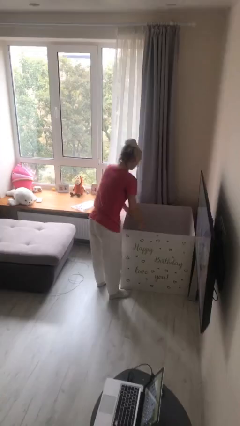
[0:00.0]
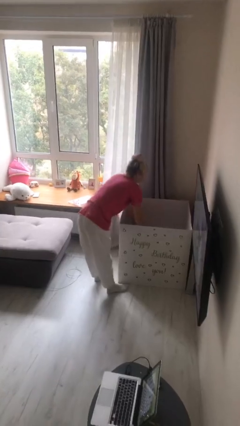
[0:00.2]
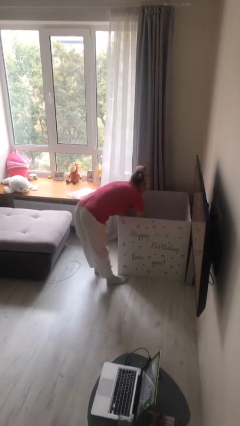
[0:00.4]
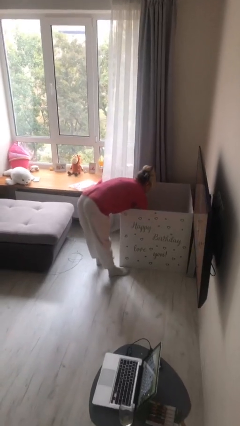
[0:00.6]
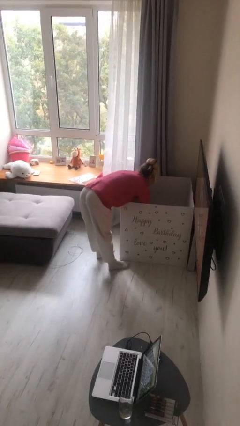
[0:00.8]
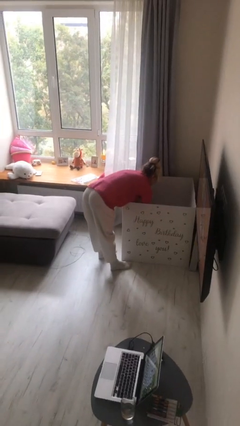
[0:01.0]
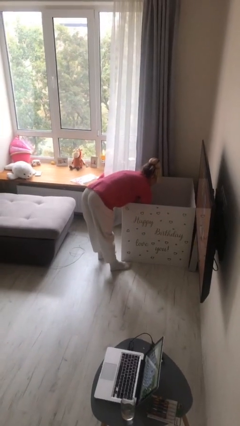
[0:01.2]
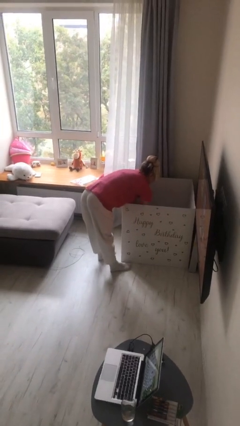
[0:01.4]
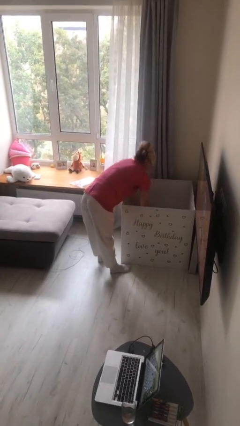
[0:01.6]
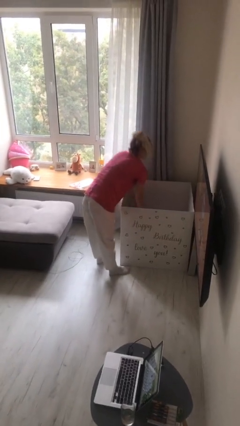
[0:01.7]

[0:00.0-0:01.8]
person searches in box

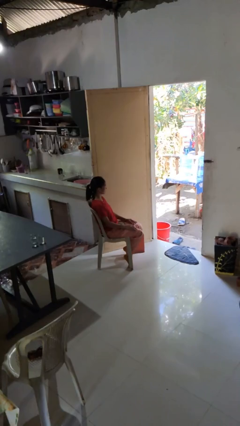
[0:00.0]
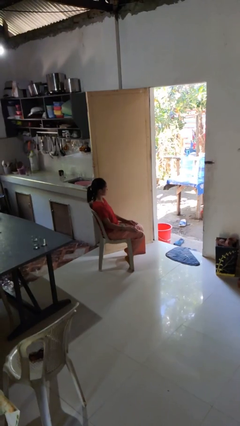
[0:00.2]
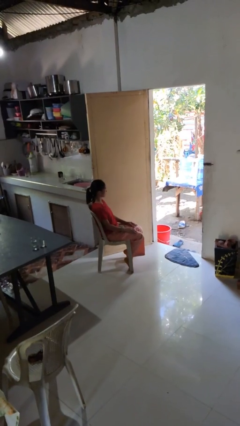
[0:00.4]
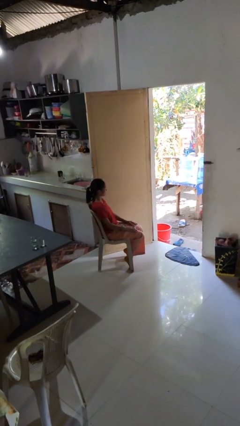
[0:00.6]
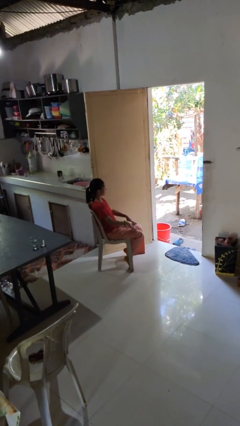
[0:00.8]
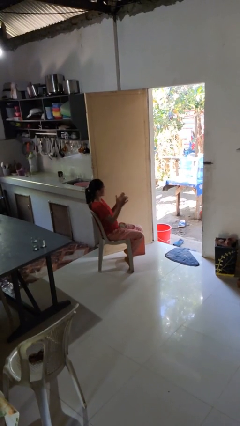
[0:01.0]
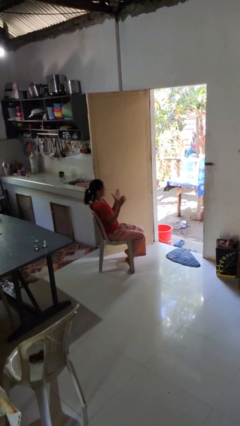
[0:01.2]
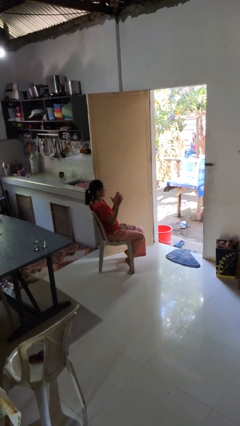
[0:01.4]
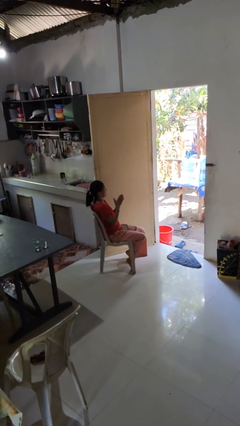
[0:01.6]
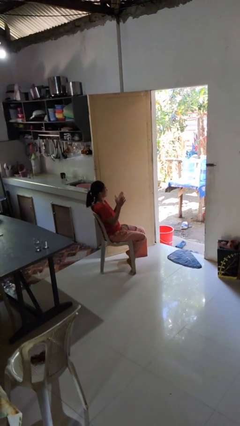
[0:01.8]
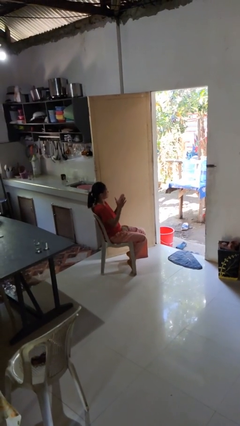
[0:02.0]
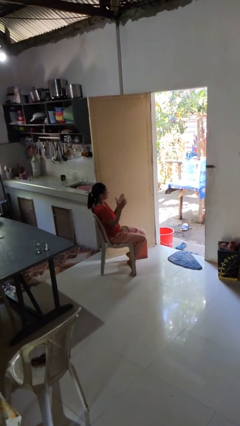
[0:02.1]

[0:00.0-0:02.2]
person claps hands

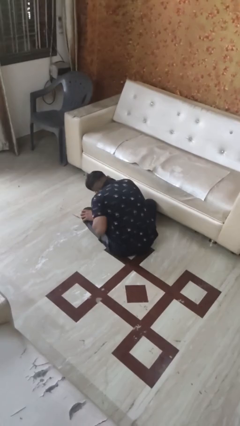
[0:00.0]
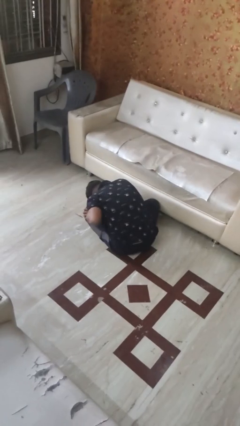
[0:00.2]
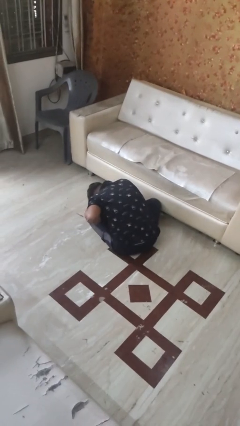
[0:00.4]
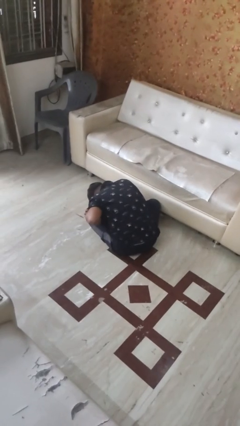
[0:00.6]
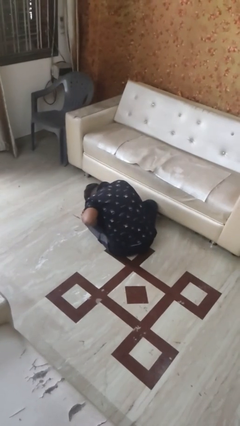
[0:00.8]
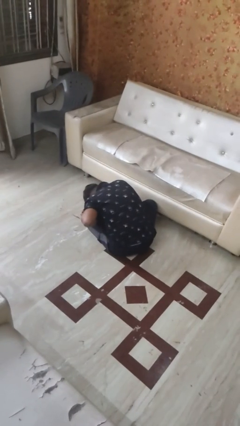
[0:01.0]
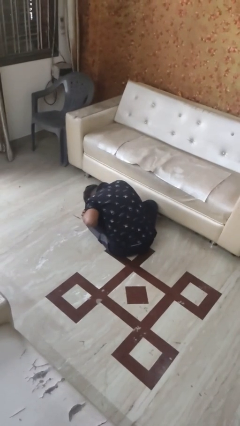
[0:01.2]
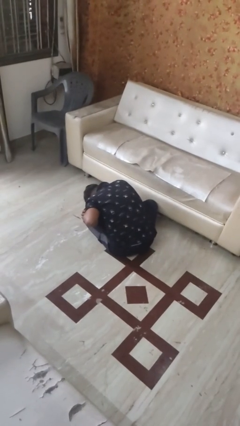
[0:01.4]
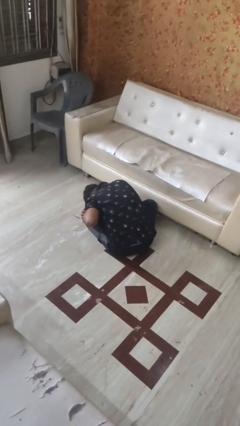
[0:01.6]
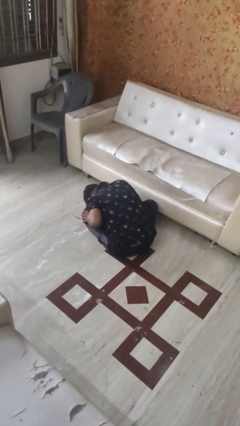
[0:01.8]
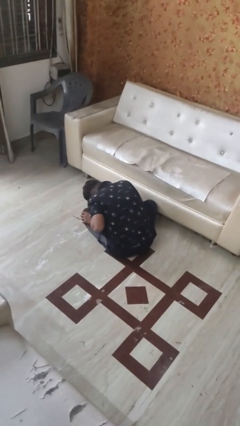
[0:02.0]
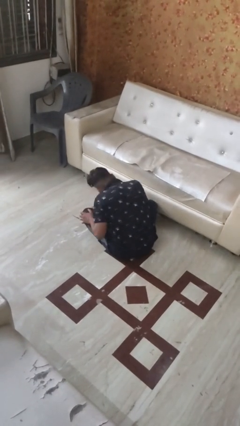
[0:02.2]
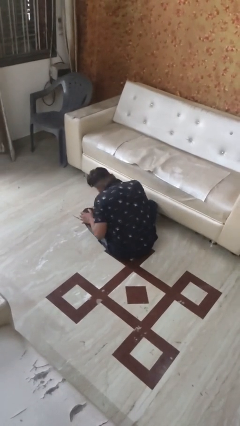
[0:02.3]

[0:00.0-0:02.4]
person searches under bed

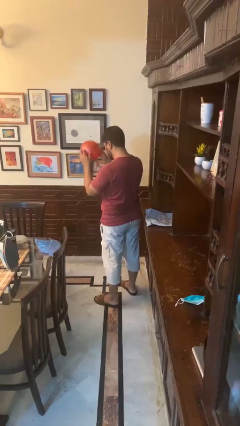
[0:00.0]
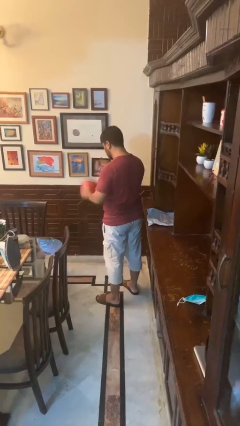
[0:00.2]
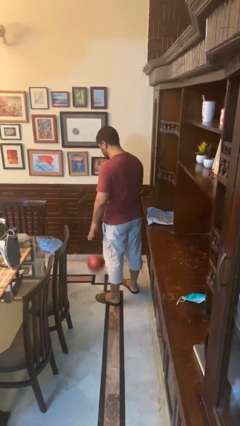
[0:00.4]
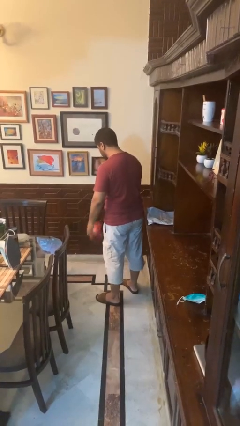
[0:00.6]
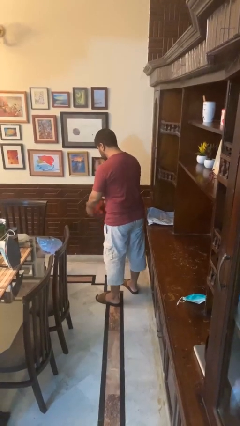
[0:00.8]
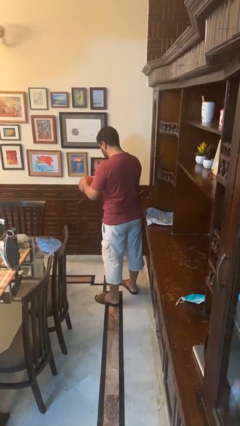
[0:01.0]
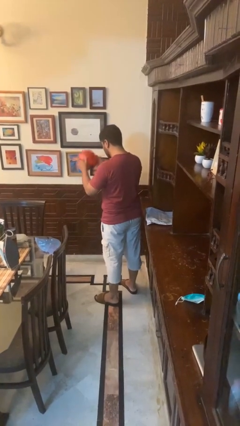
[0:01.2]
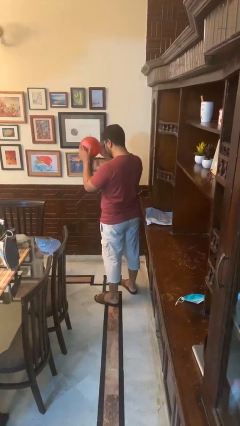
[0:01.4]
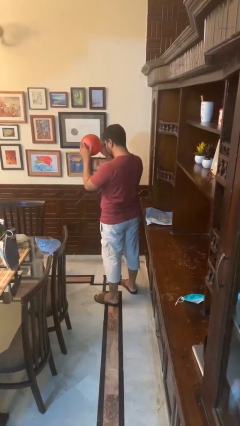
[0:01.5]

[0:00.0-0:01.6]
person bounces ball on floor

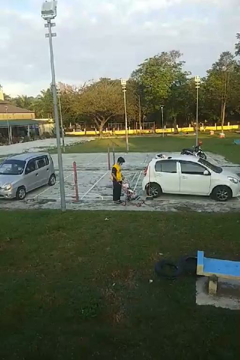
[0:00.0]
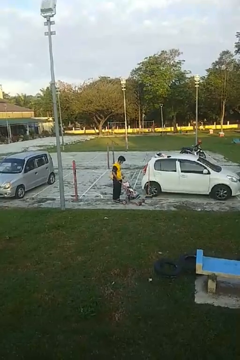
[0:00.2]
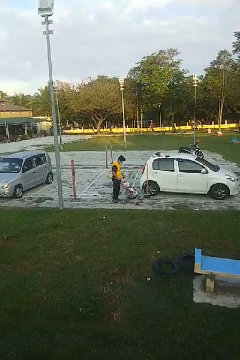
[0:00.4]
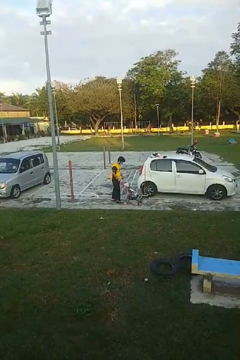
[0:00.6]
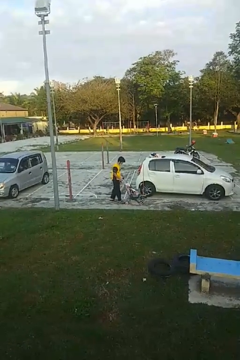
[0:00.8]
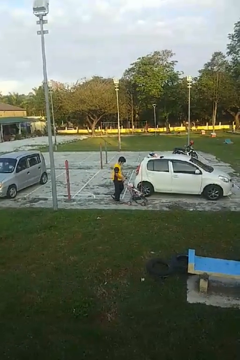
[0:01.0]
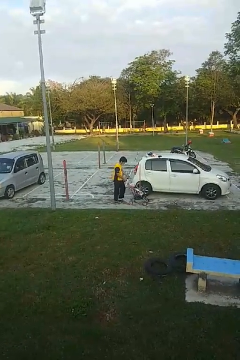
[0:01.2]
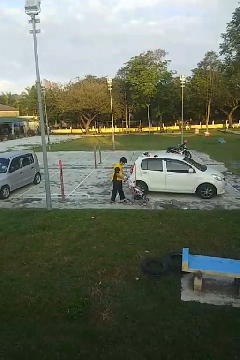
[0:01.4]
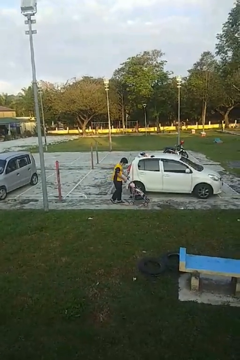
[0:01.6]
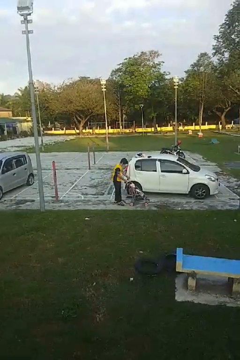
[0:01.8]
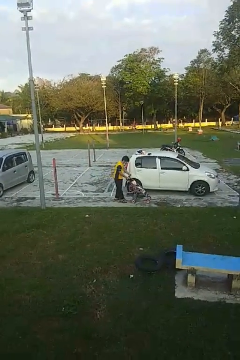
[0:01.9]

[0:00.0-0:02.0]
person pushes wheeled cart

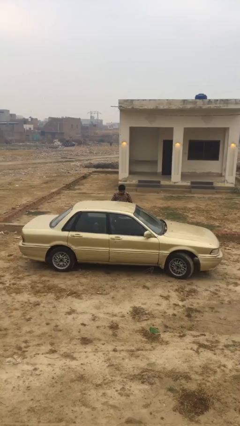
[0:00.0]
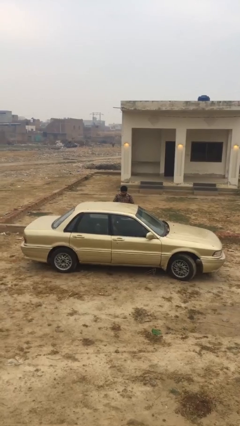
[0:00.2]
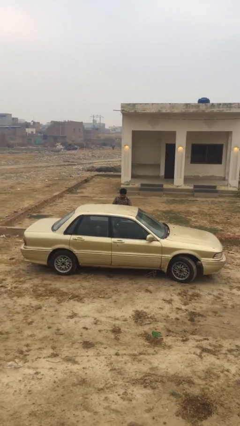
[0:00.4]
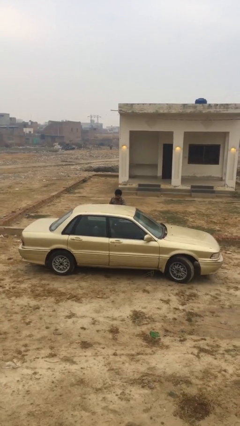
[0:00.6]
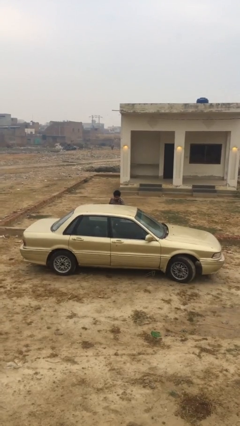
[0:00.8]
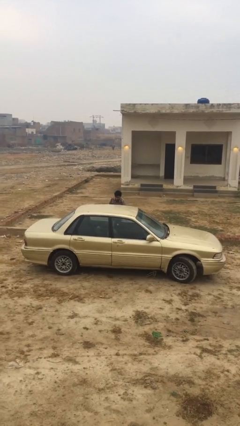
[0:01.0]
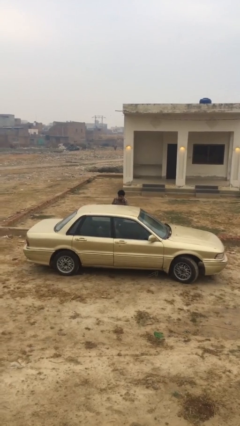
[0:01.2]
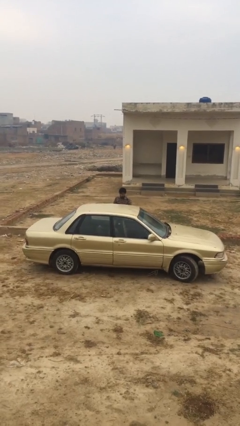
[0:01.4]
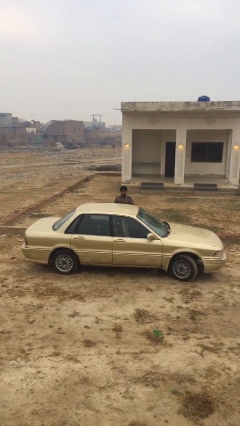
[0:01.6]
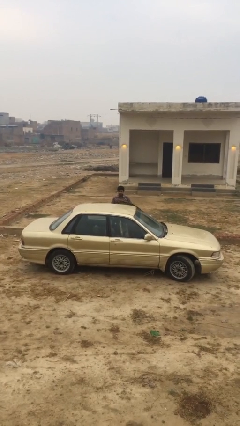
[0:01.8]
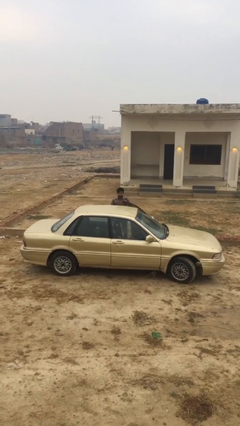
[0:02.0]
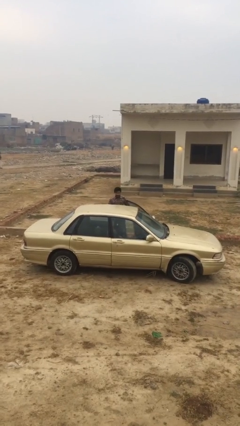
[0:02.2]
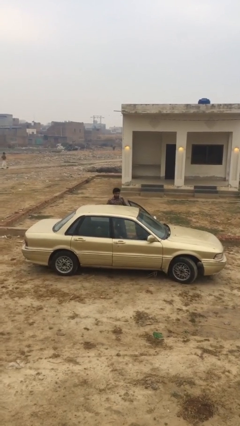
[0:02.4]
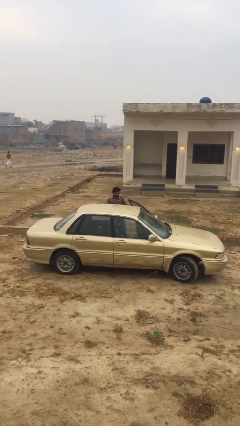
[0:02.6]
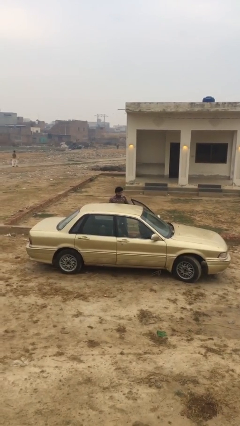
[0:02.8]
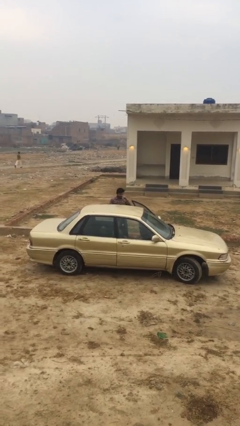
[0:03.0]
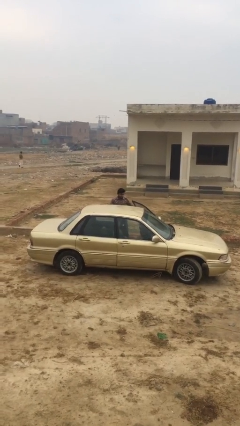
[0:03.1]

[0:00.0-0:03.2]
person opens car door

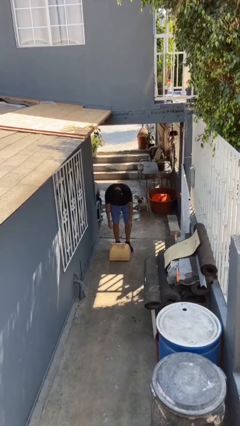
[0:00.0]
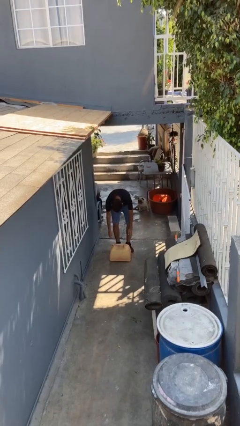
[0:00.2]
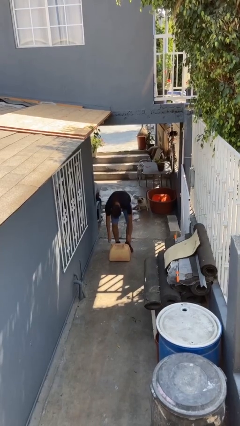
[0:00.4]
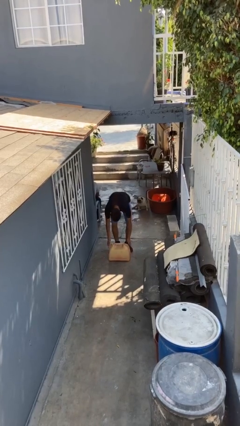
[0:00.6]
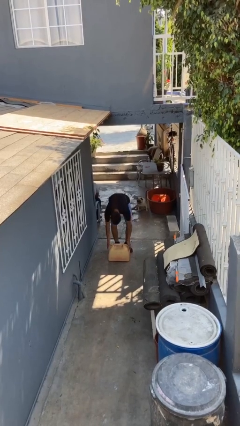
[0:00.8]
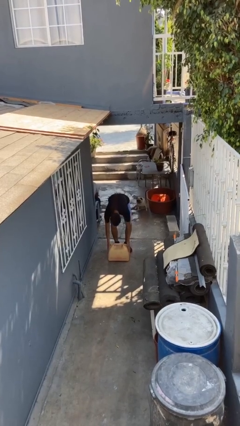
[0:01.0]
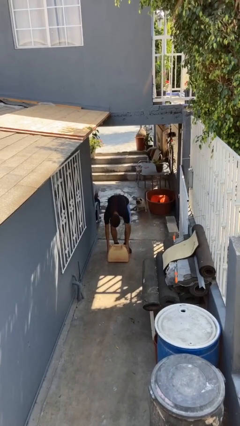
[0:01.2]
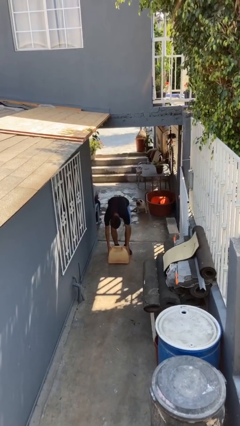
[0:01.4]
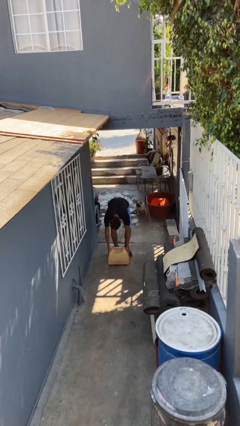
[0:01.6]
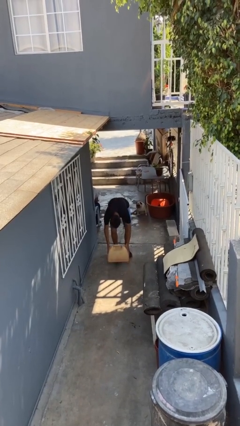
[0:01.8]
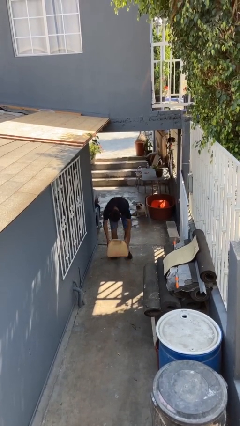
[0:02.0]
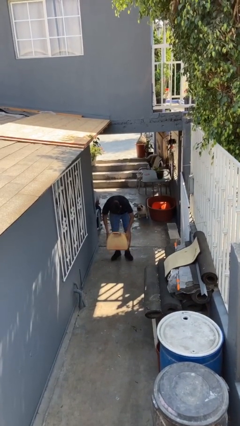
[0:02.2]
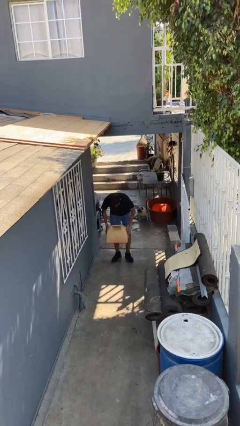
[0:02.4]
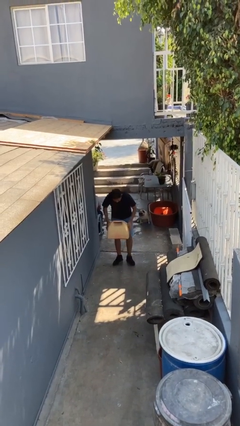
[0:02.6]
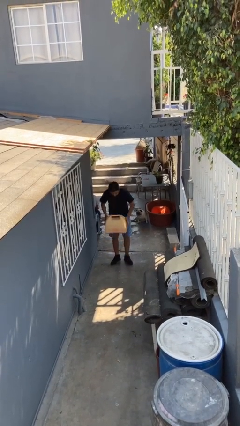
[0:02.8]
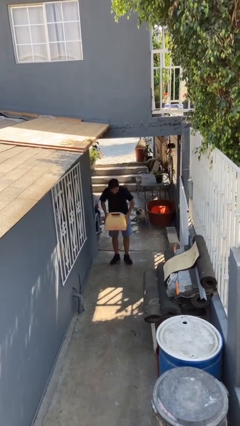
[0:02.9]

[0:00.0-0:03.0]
person picks up object from floor

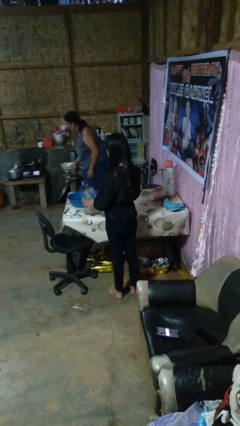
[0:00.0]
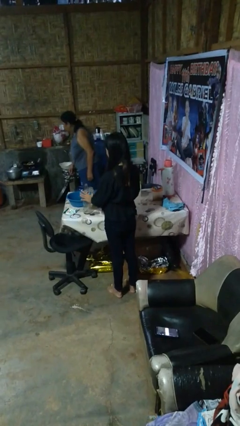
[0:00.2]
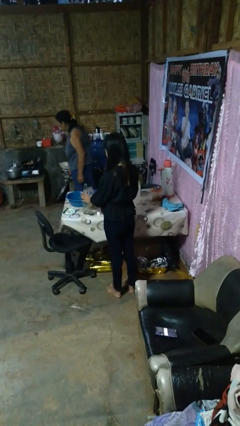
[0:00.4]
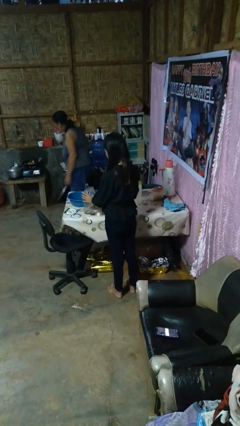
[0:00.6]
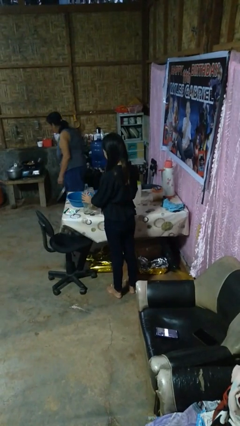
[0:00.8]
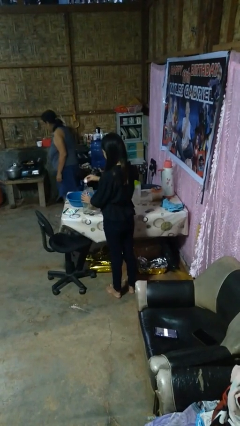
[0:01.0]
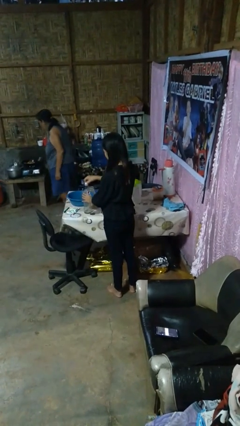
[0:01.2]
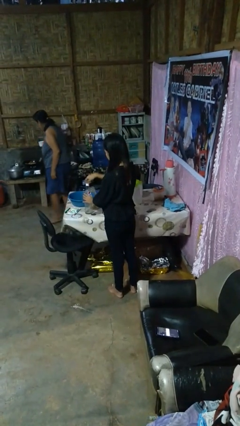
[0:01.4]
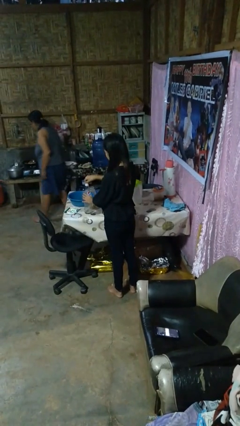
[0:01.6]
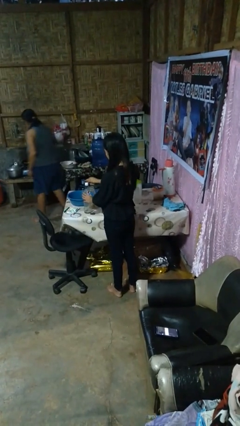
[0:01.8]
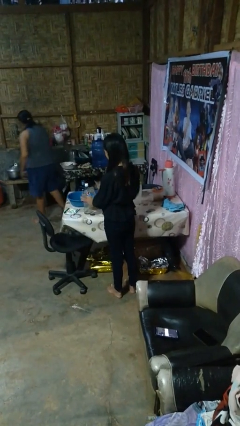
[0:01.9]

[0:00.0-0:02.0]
person screws lid to bottle
